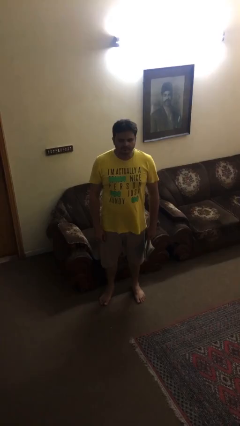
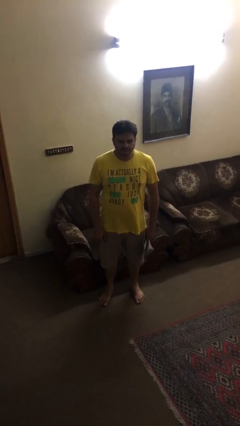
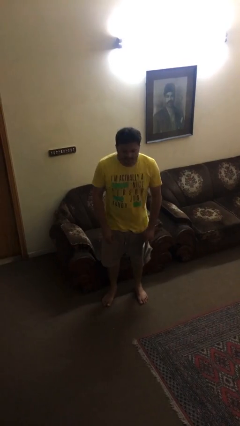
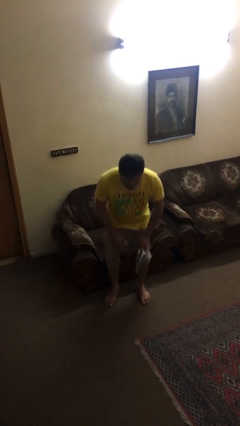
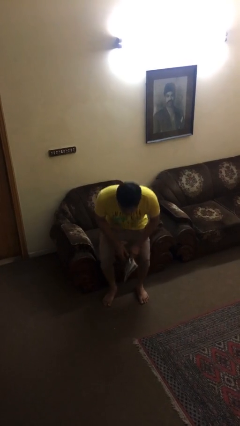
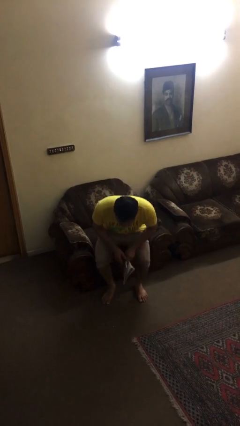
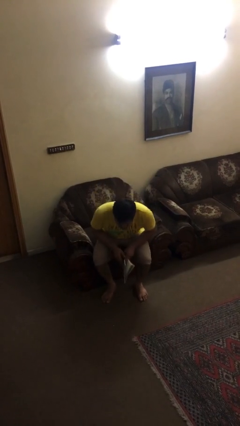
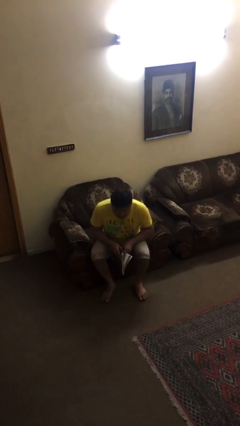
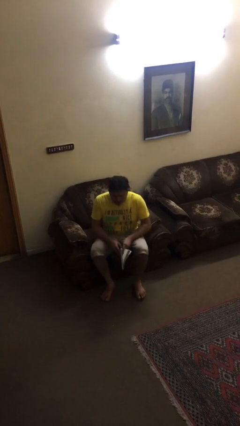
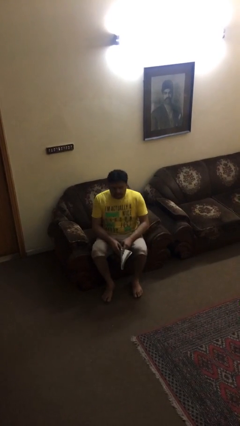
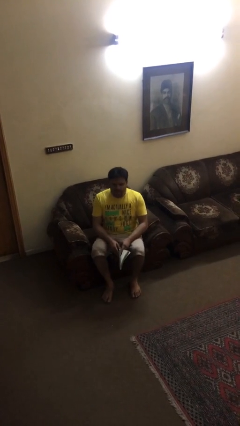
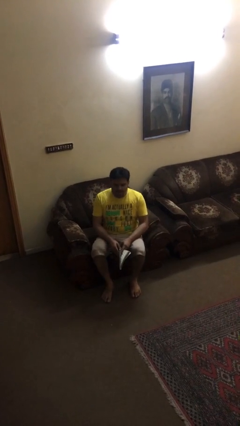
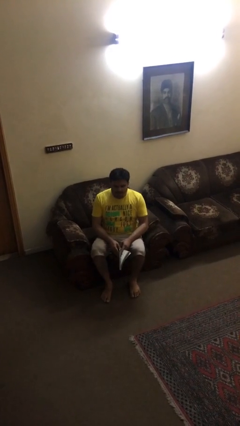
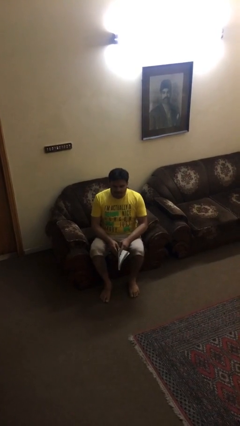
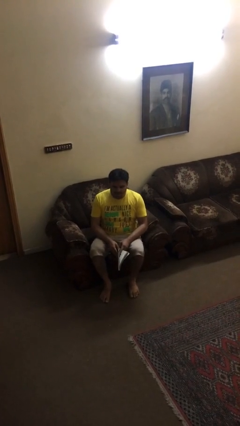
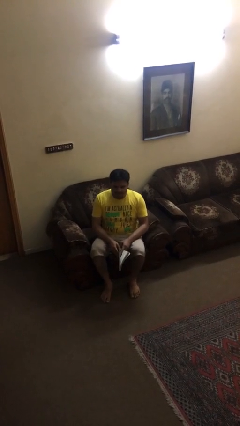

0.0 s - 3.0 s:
person sits down

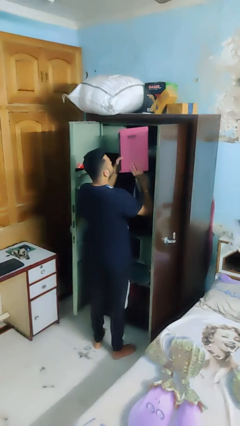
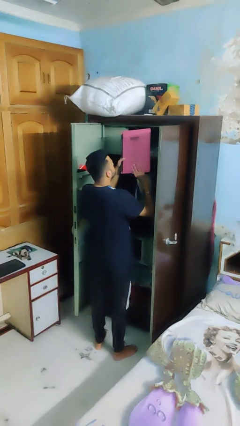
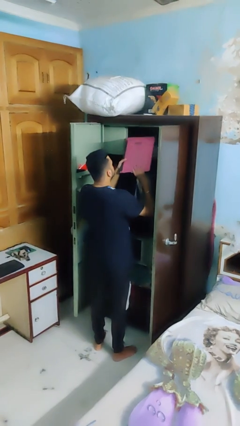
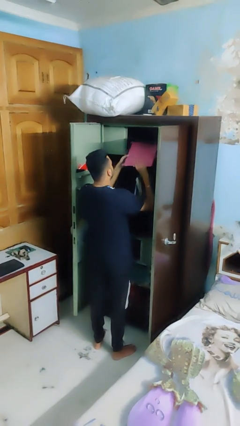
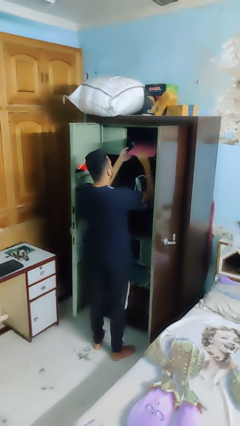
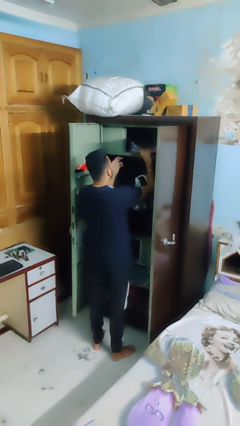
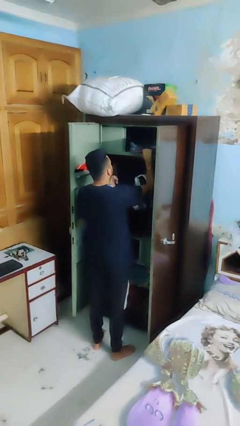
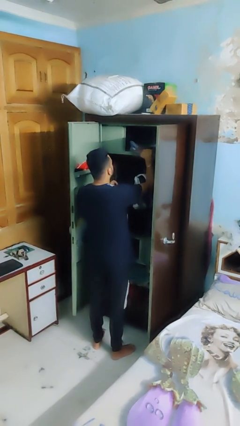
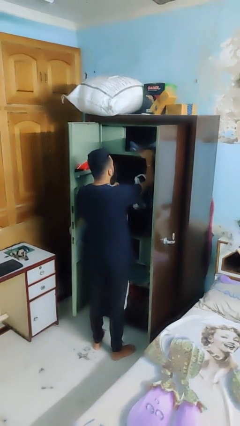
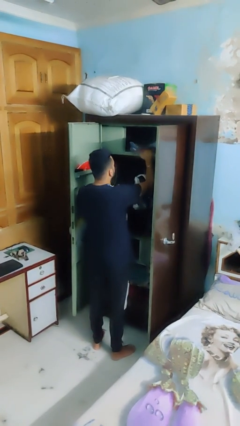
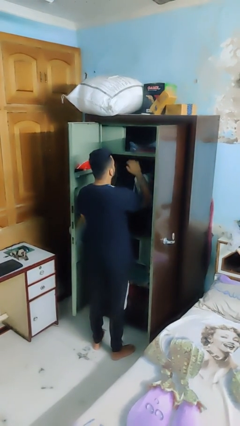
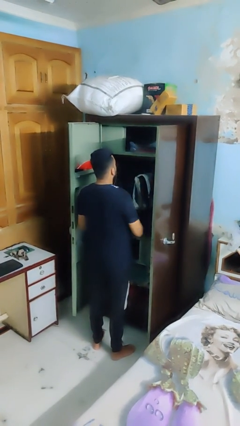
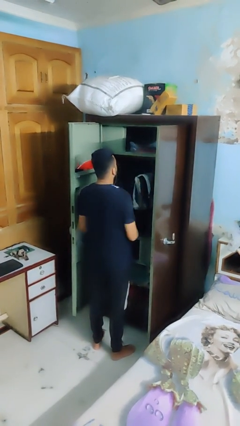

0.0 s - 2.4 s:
person puts down object on shelf

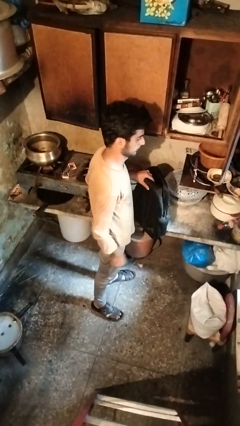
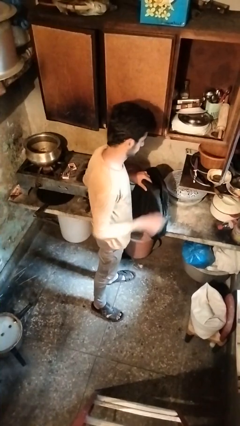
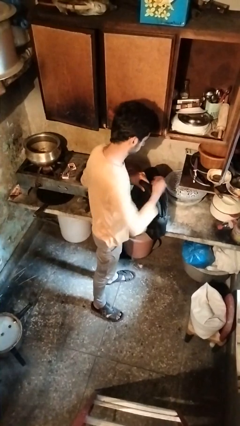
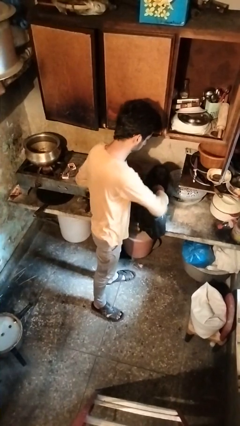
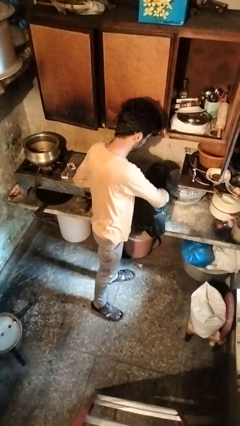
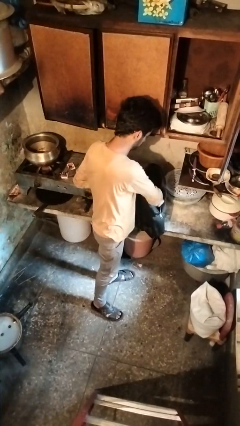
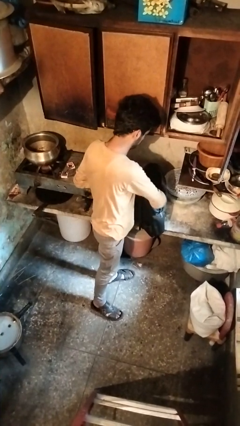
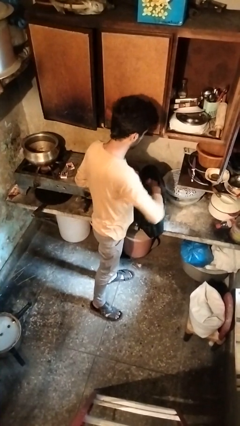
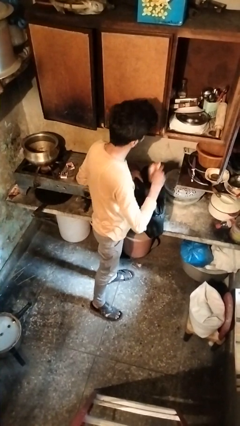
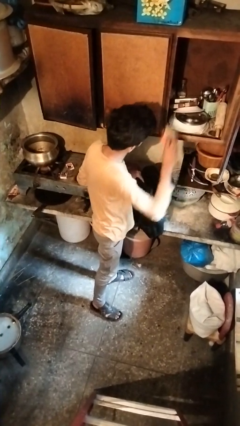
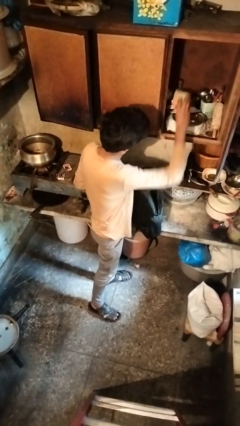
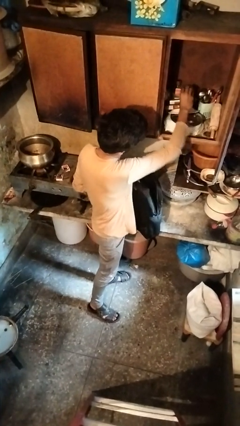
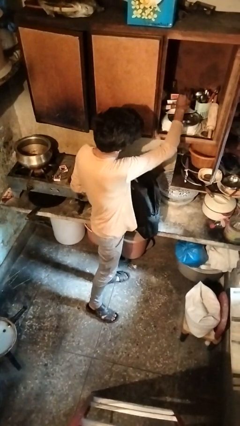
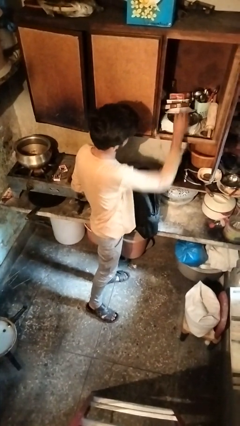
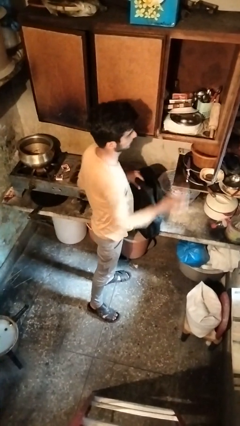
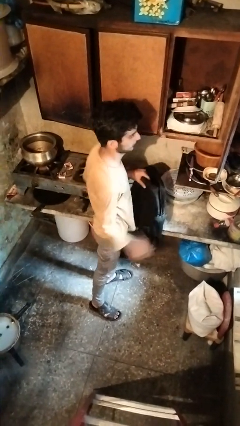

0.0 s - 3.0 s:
person loads groceries into cabinet

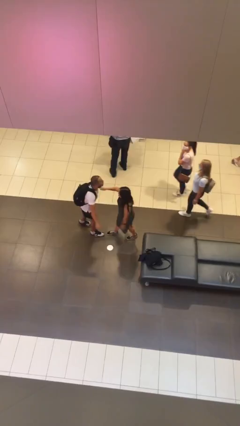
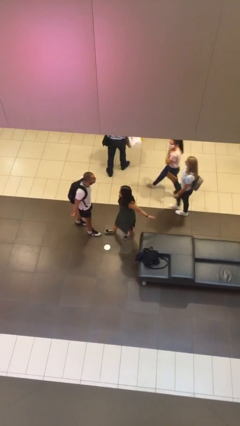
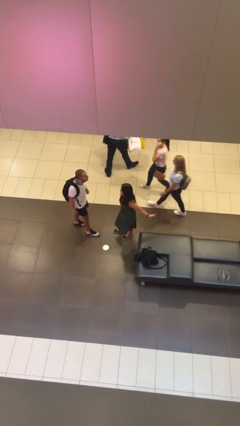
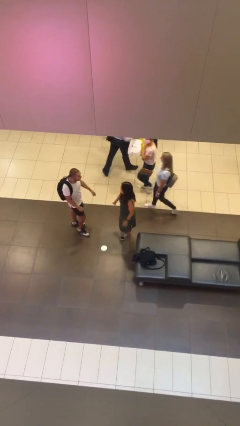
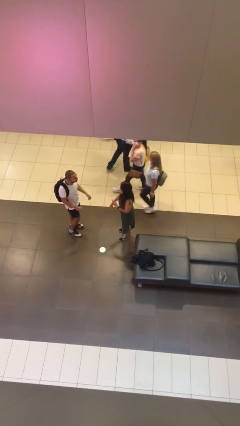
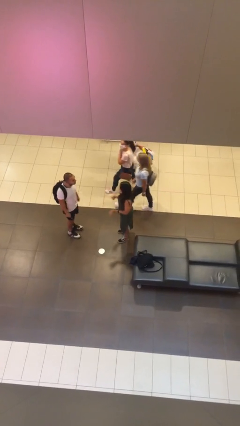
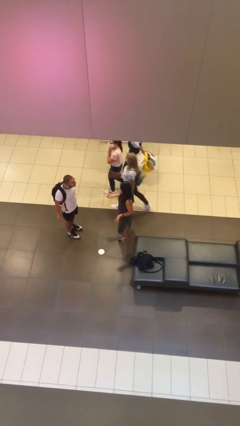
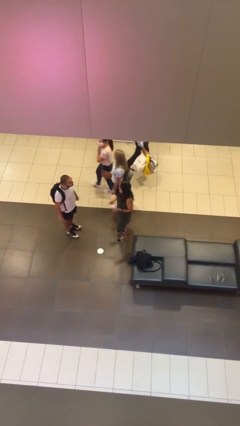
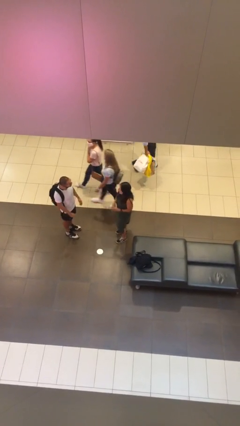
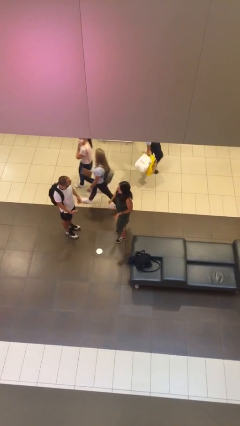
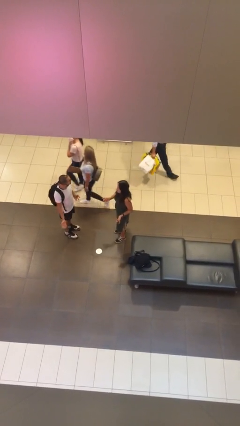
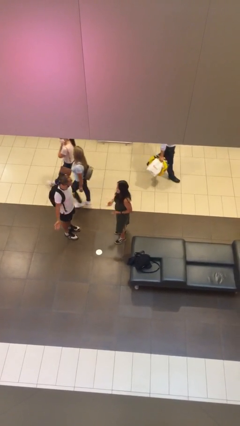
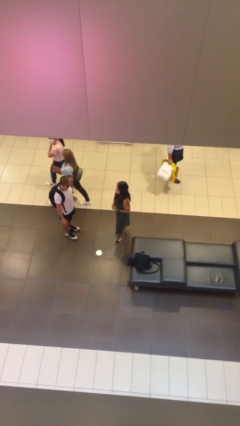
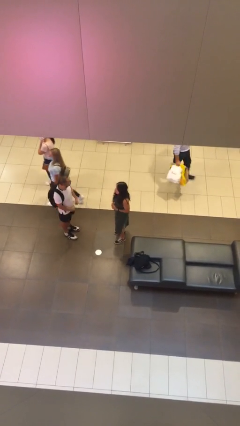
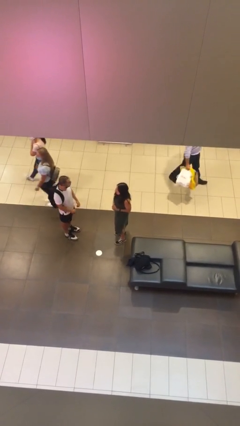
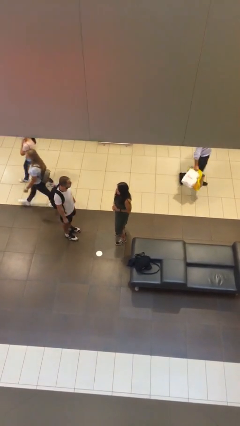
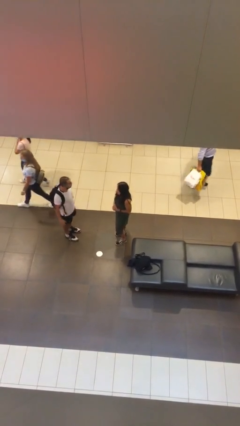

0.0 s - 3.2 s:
person talks to person

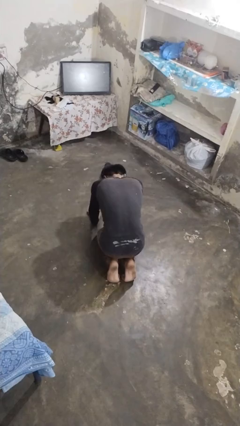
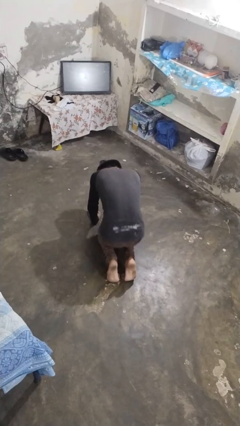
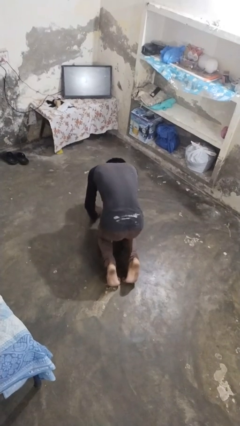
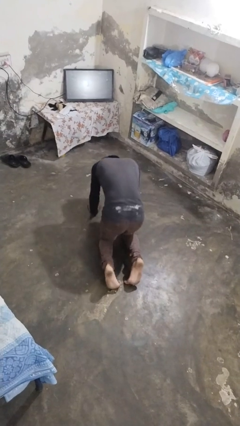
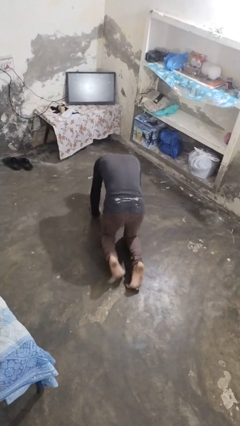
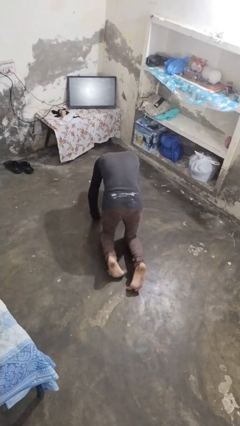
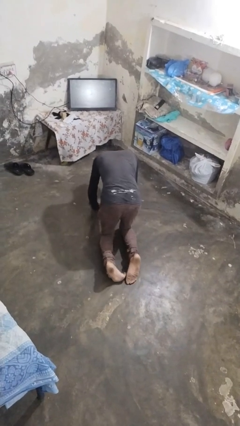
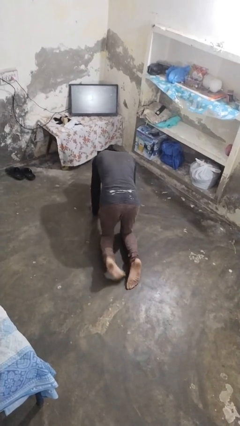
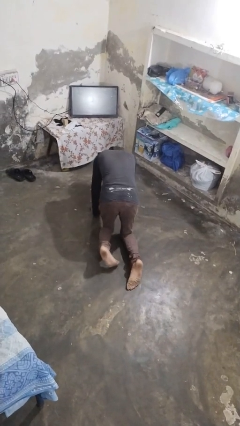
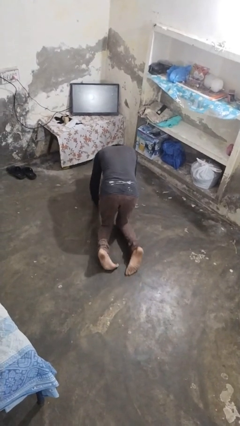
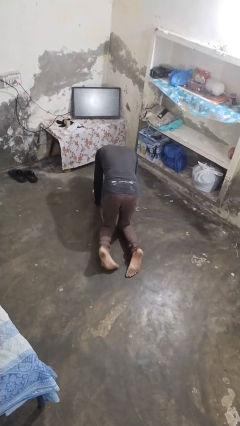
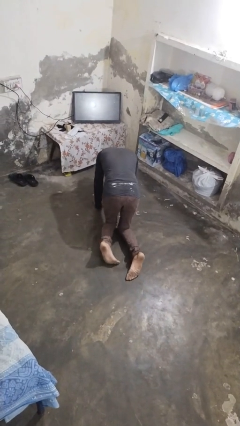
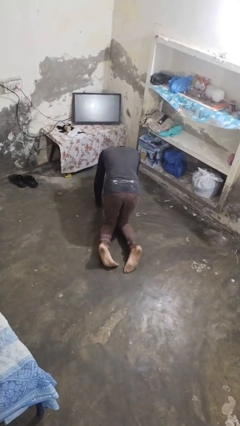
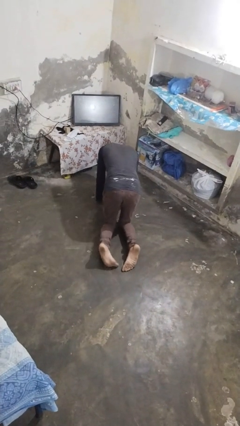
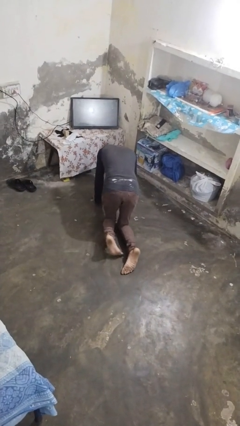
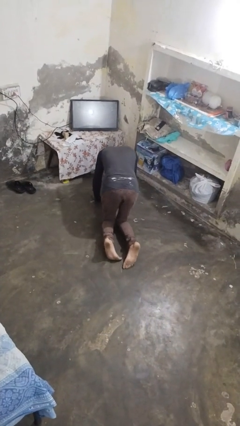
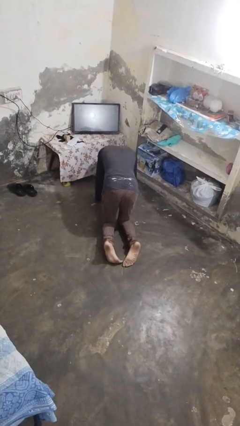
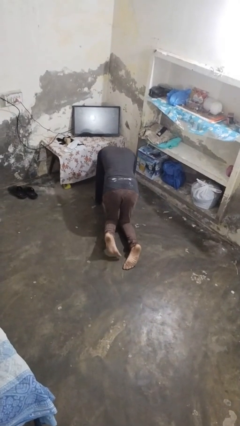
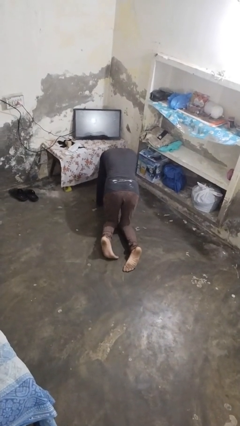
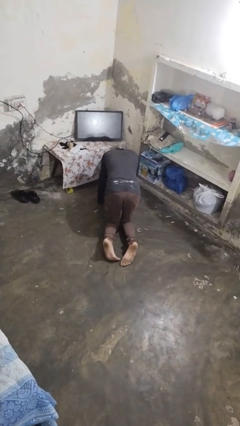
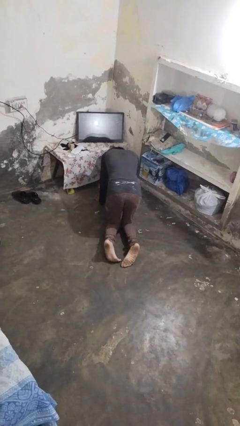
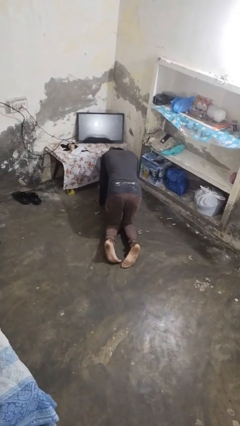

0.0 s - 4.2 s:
person crawls

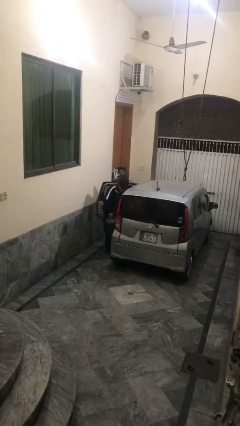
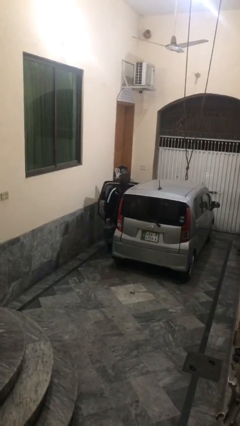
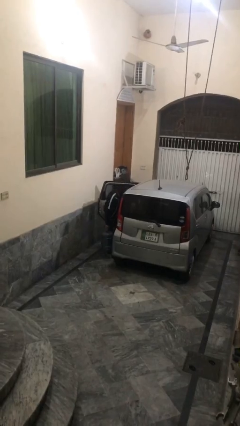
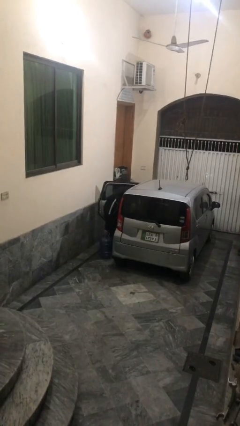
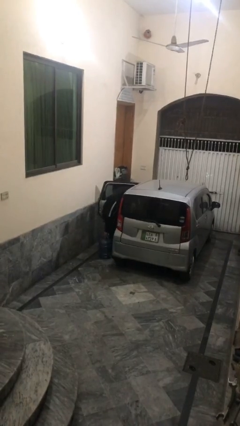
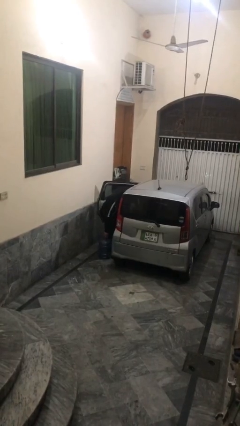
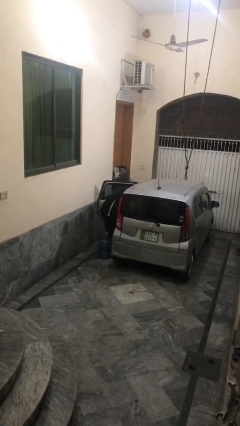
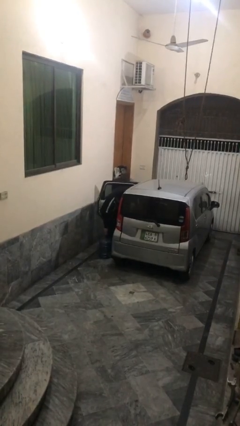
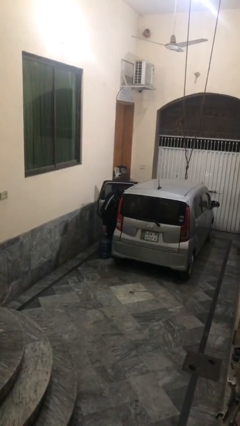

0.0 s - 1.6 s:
person unloads car
